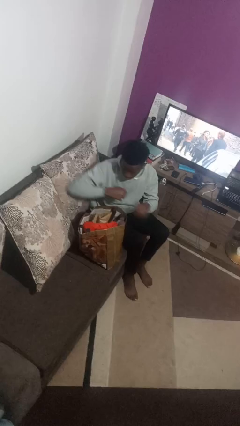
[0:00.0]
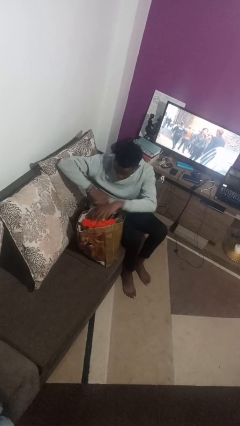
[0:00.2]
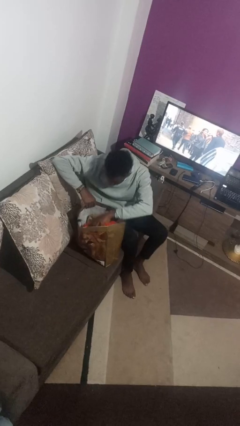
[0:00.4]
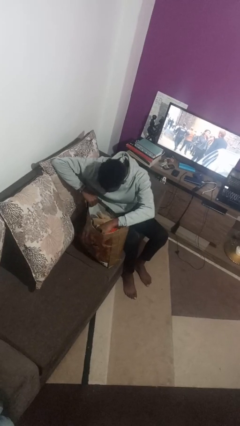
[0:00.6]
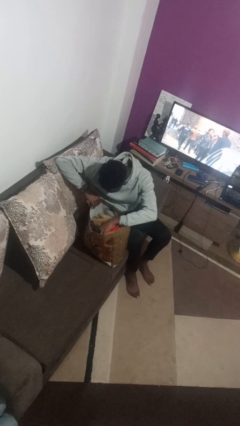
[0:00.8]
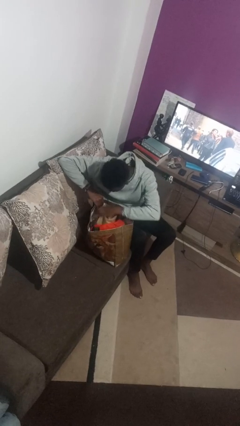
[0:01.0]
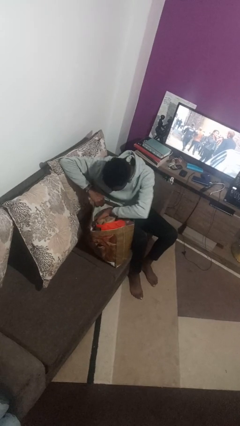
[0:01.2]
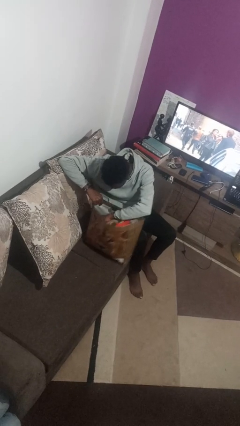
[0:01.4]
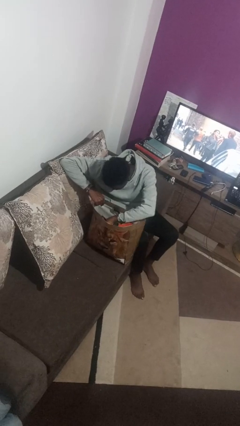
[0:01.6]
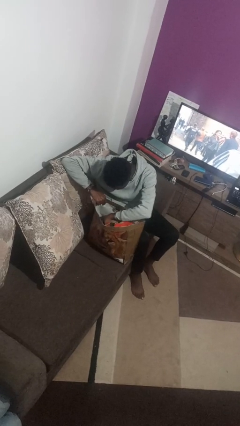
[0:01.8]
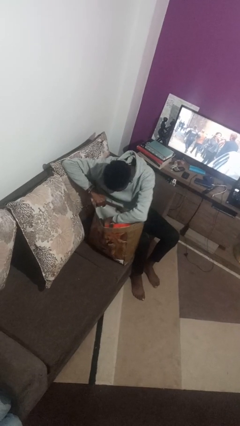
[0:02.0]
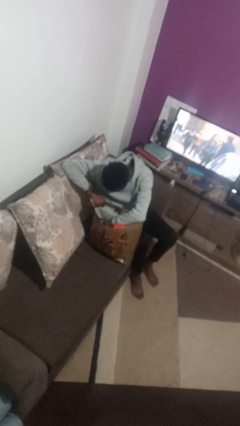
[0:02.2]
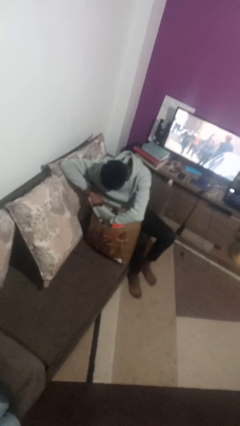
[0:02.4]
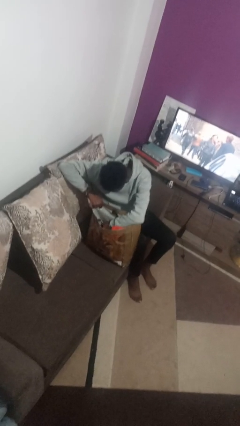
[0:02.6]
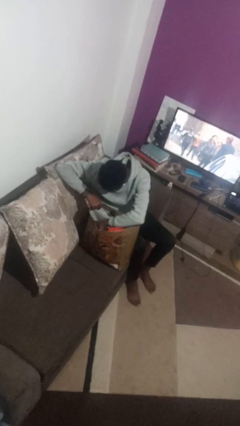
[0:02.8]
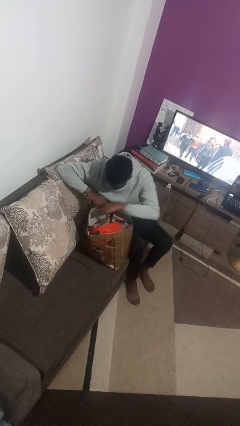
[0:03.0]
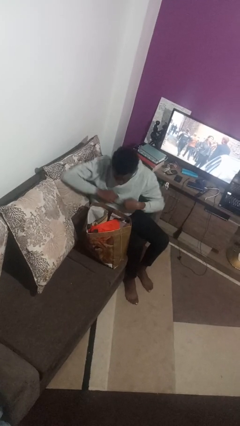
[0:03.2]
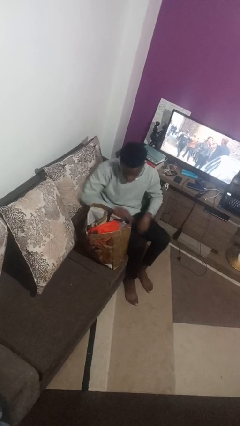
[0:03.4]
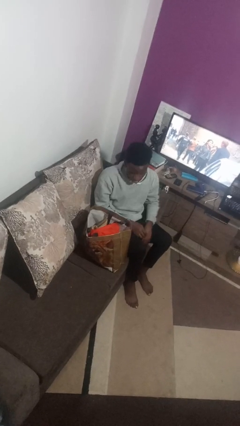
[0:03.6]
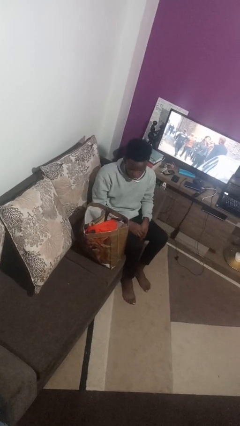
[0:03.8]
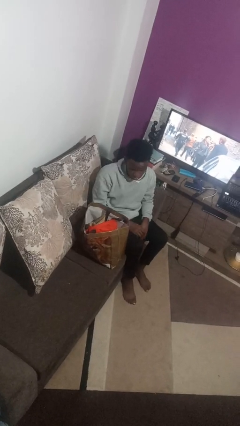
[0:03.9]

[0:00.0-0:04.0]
person searches in bag

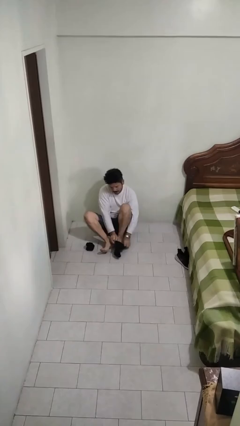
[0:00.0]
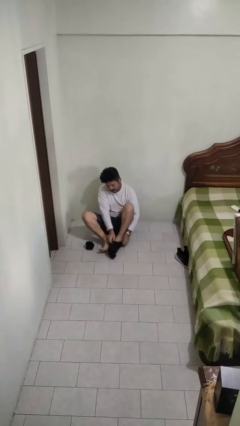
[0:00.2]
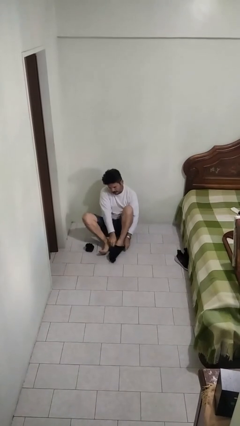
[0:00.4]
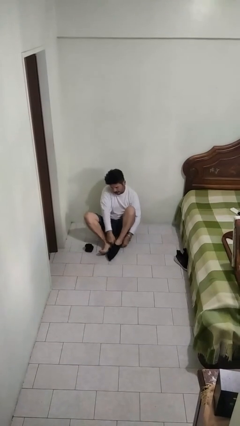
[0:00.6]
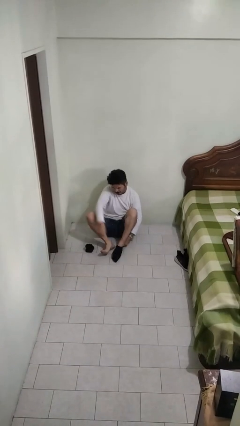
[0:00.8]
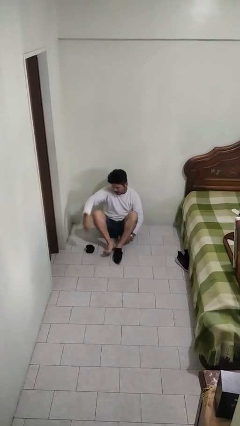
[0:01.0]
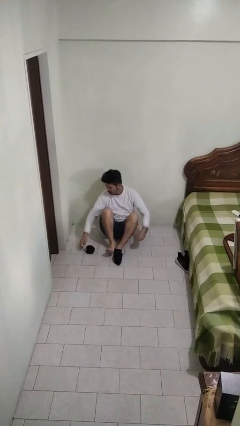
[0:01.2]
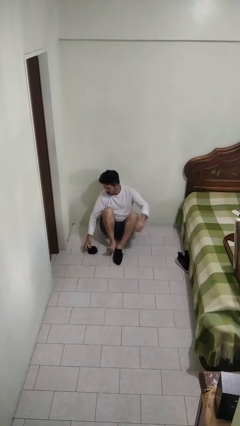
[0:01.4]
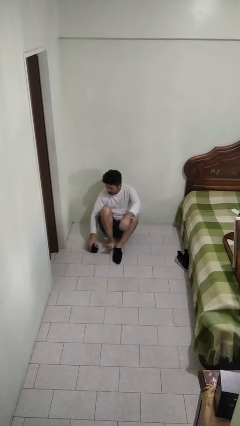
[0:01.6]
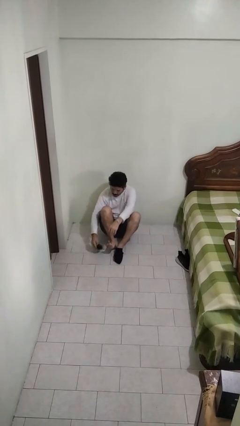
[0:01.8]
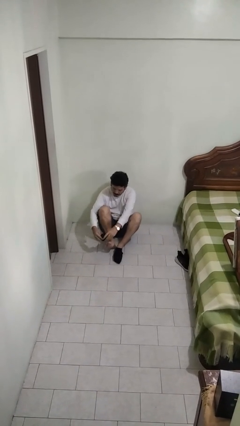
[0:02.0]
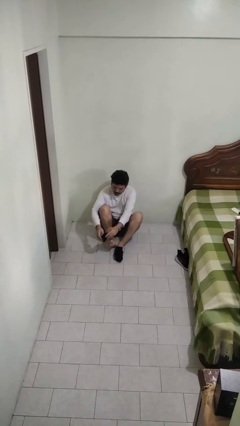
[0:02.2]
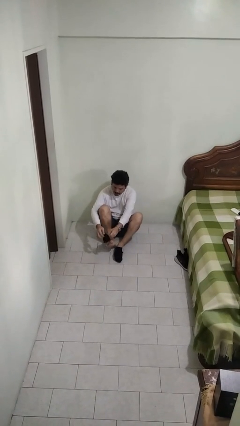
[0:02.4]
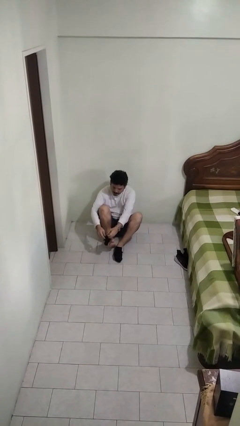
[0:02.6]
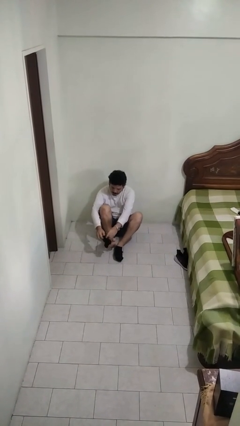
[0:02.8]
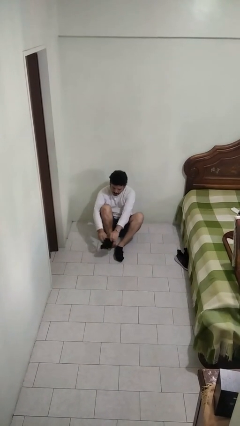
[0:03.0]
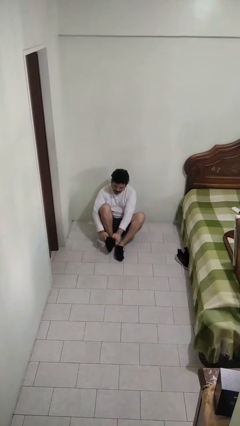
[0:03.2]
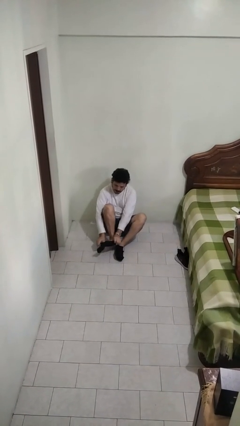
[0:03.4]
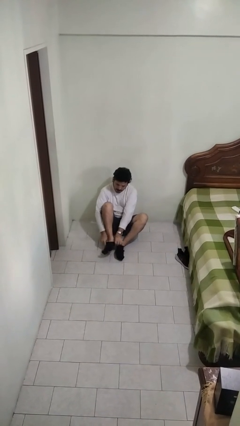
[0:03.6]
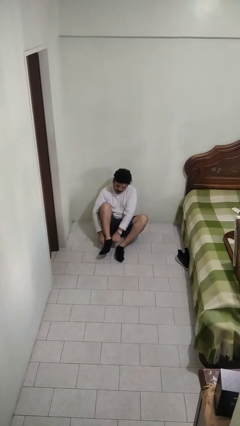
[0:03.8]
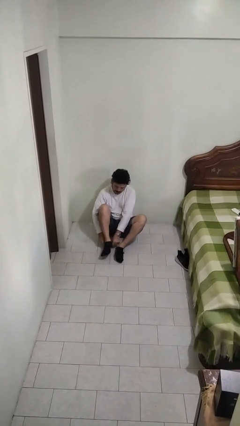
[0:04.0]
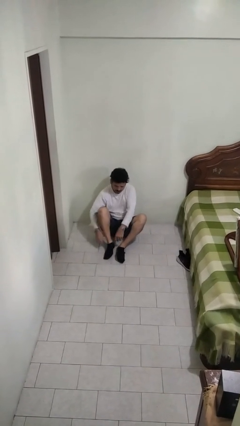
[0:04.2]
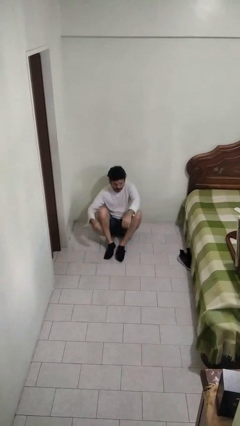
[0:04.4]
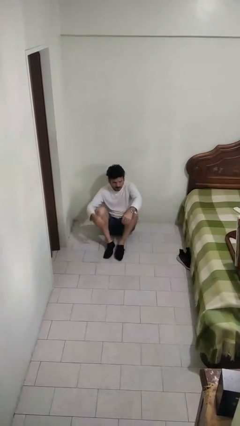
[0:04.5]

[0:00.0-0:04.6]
person puts on socks

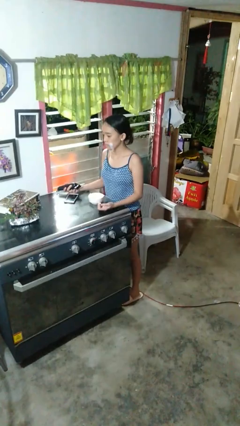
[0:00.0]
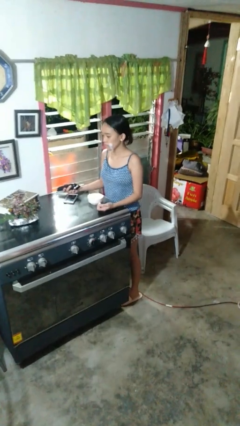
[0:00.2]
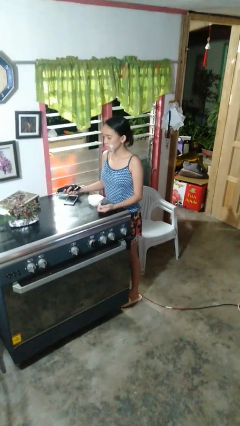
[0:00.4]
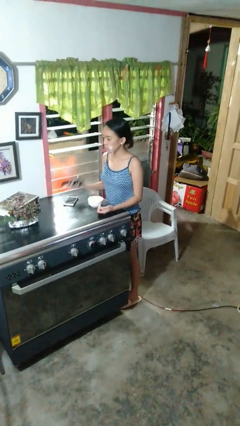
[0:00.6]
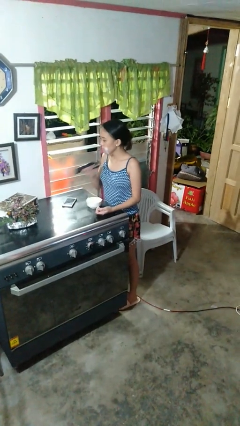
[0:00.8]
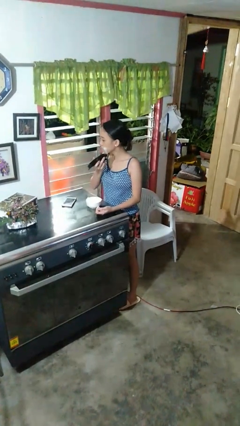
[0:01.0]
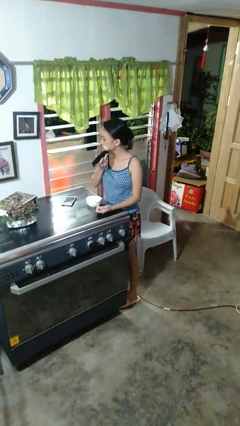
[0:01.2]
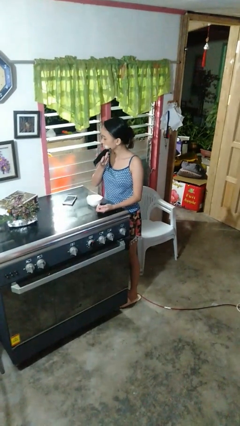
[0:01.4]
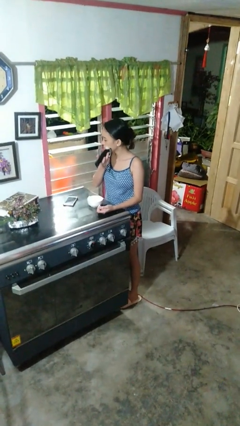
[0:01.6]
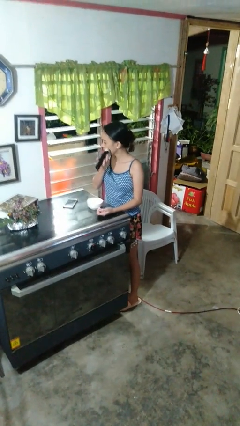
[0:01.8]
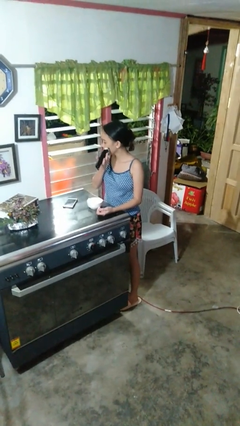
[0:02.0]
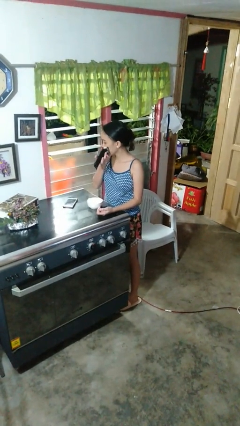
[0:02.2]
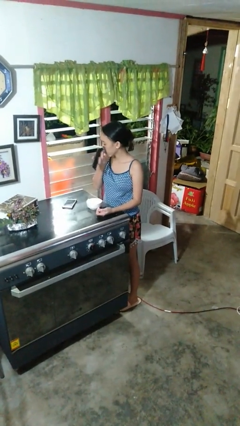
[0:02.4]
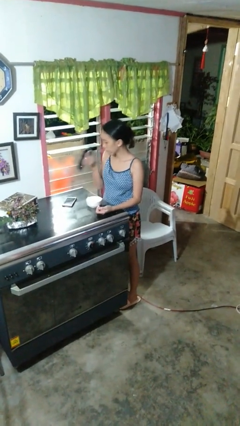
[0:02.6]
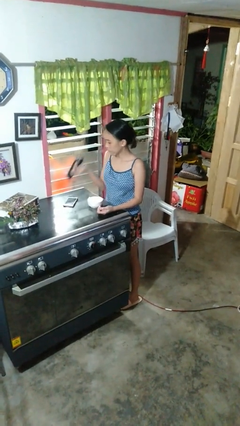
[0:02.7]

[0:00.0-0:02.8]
person shaves face

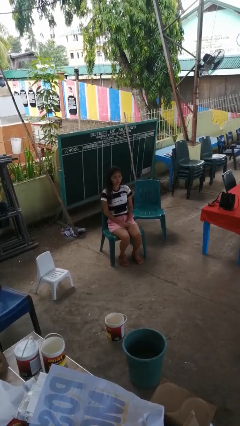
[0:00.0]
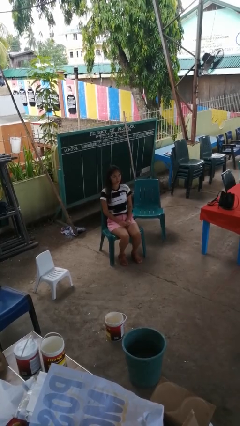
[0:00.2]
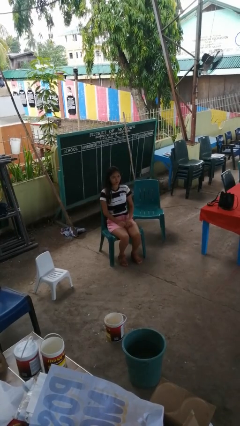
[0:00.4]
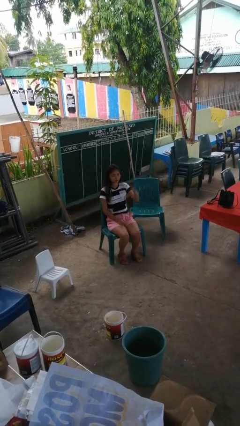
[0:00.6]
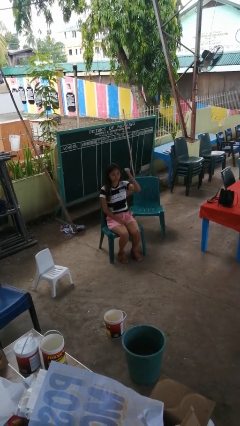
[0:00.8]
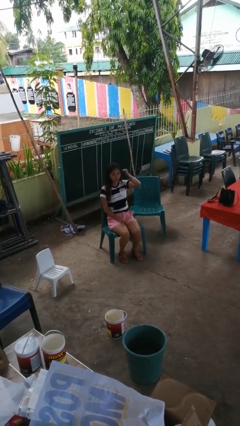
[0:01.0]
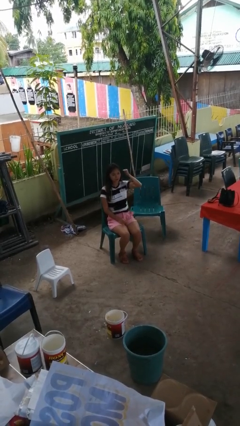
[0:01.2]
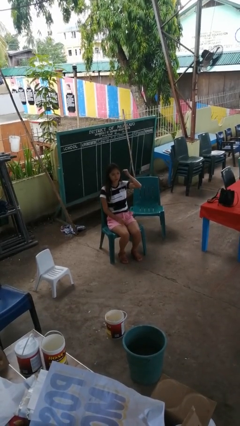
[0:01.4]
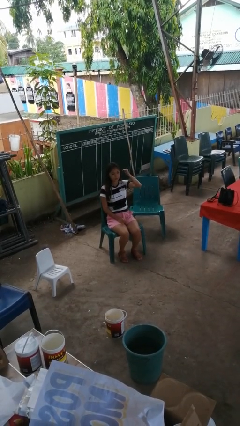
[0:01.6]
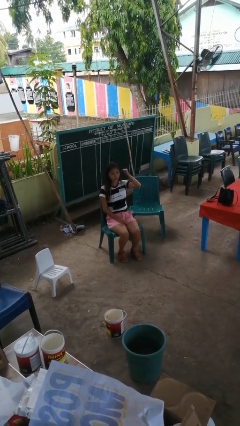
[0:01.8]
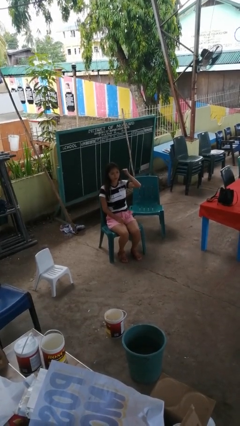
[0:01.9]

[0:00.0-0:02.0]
person gestures behind me

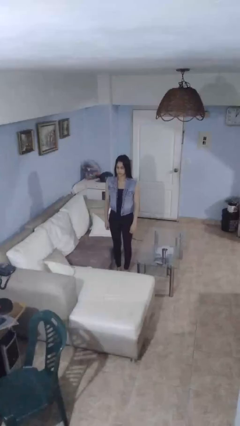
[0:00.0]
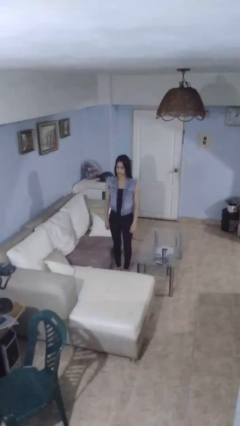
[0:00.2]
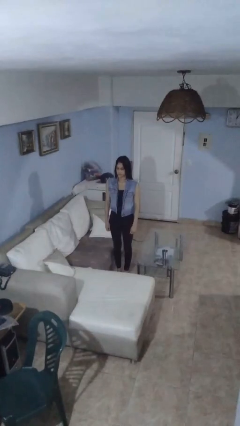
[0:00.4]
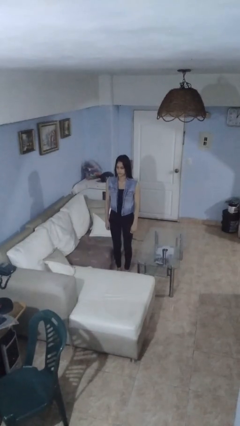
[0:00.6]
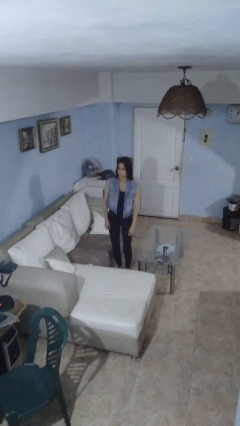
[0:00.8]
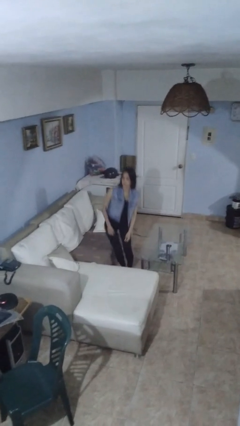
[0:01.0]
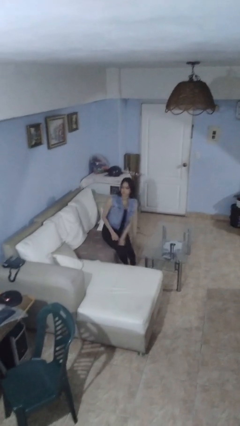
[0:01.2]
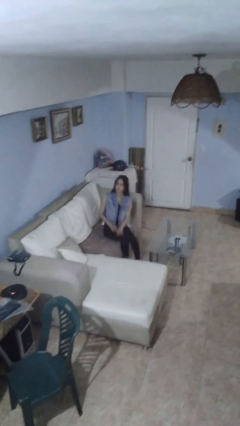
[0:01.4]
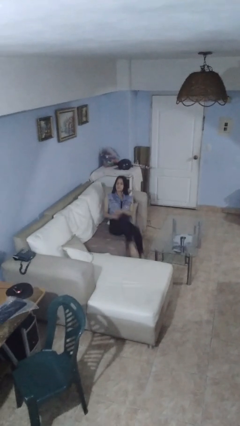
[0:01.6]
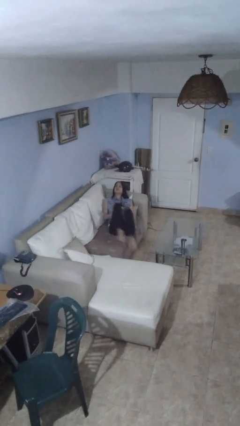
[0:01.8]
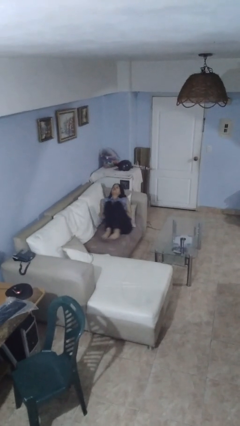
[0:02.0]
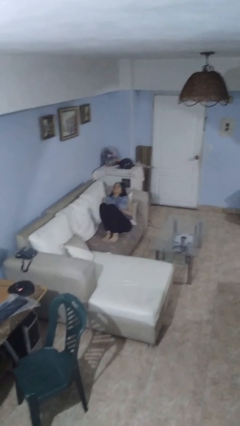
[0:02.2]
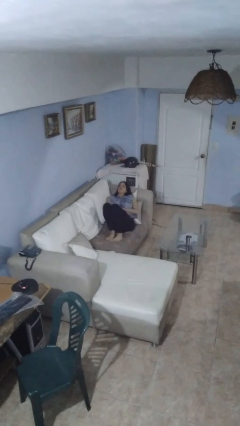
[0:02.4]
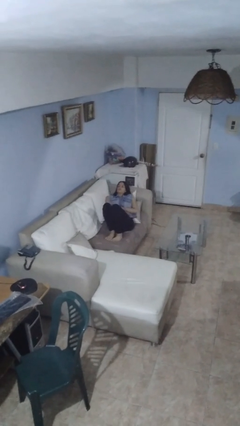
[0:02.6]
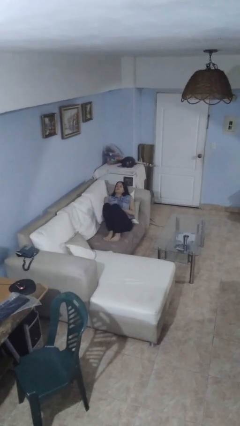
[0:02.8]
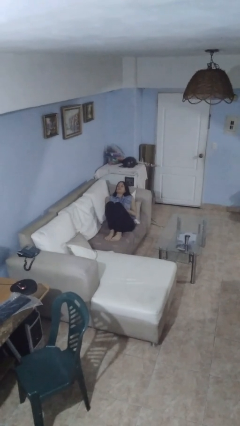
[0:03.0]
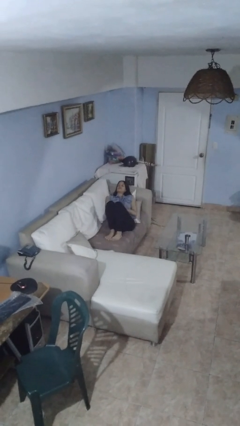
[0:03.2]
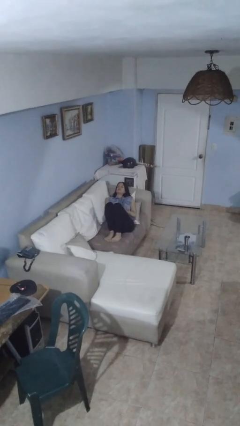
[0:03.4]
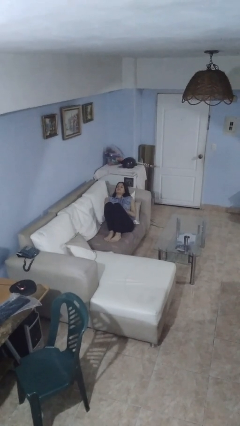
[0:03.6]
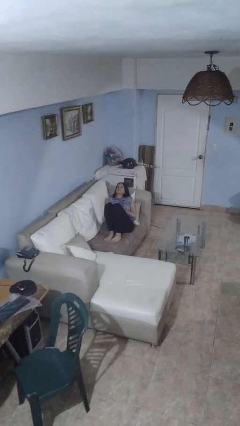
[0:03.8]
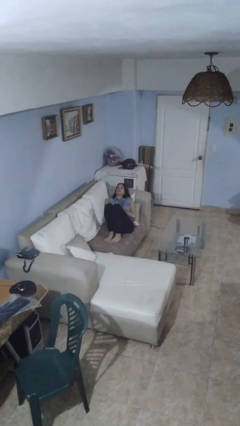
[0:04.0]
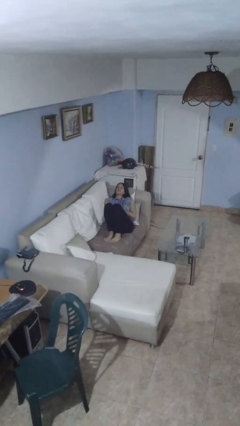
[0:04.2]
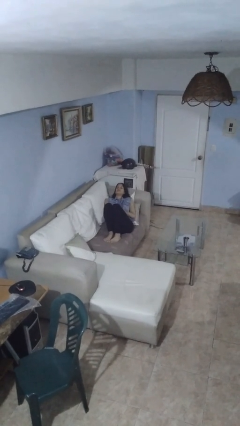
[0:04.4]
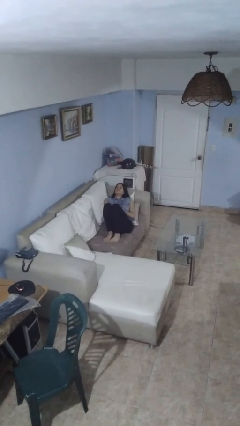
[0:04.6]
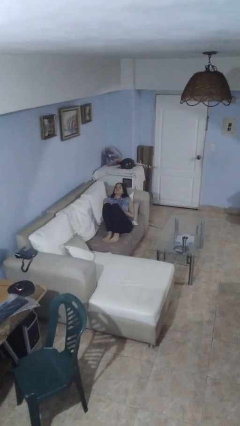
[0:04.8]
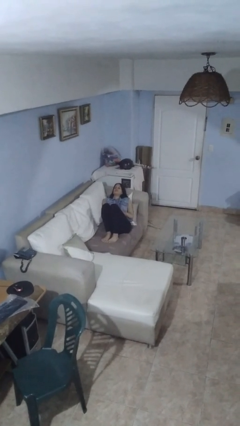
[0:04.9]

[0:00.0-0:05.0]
person lies down on couch
